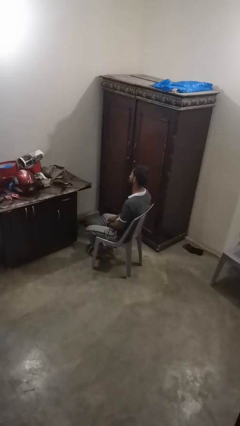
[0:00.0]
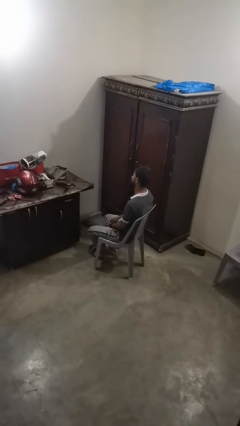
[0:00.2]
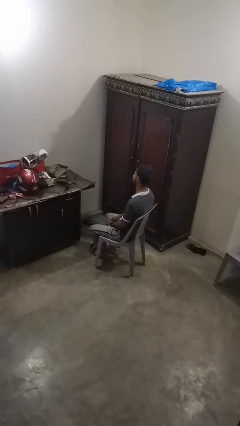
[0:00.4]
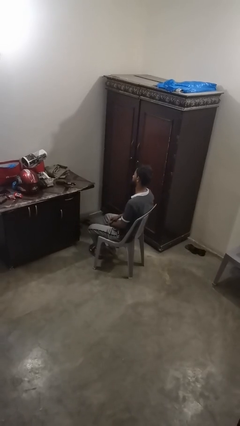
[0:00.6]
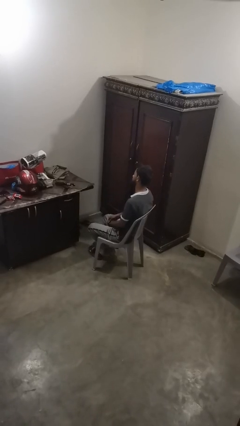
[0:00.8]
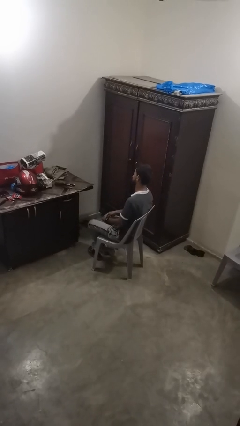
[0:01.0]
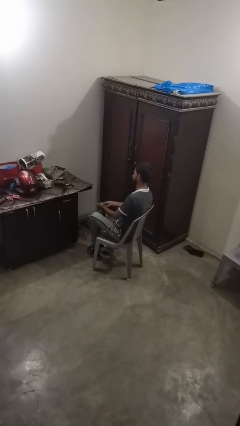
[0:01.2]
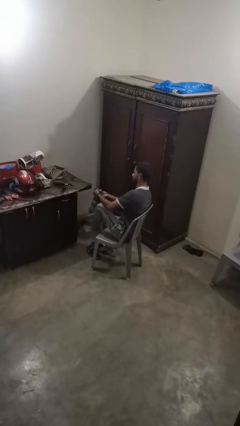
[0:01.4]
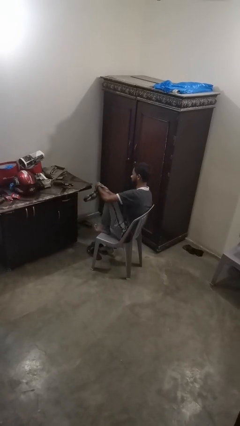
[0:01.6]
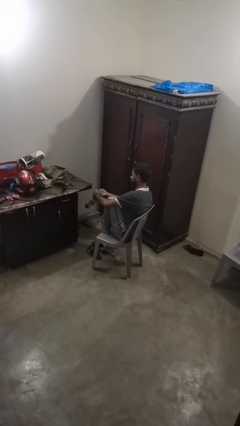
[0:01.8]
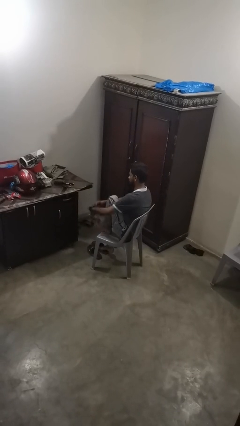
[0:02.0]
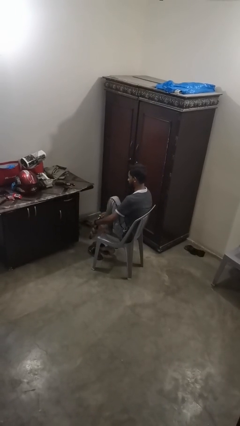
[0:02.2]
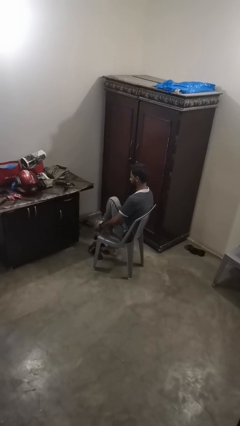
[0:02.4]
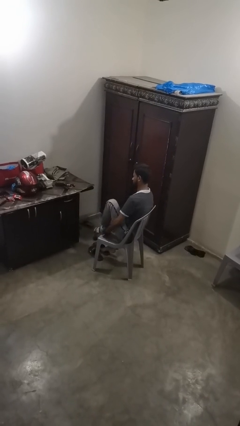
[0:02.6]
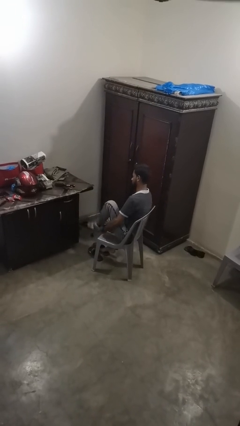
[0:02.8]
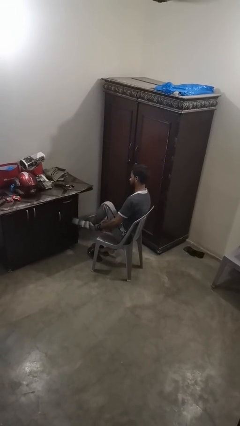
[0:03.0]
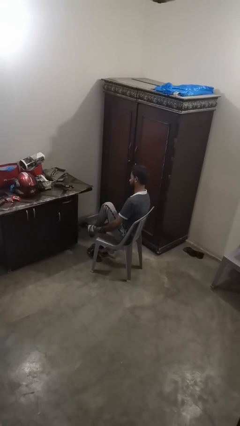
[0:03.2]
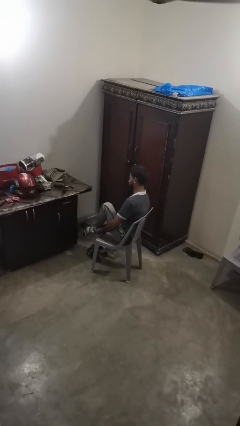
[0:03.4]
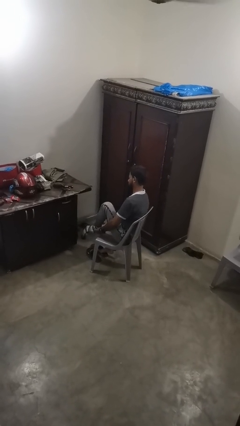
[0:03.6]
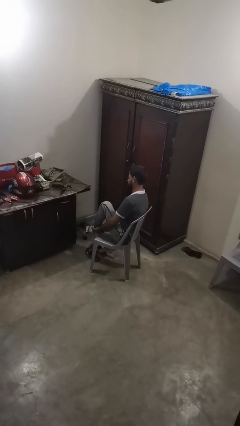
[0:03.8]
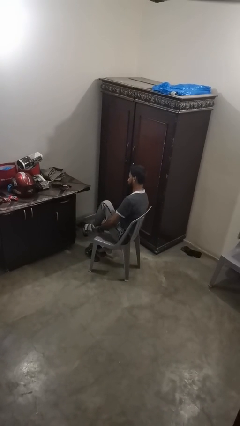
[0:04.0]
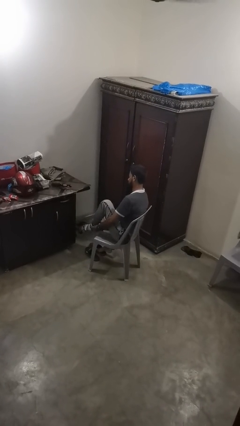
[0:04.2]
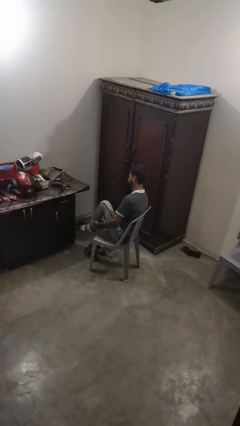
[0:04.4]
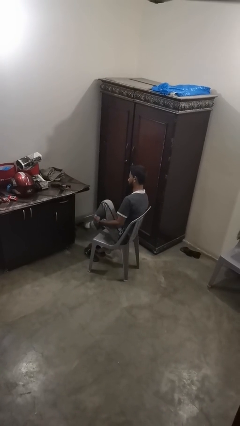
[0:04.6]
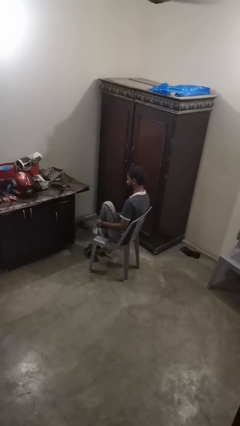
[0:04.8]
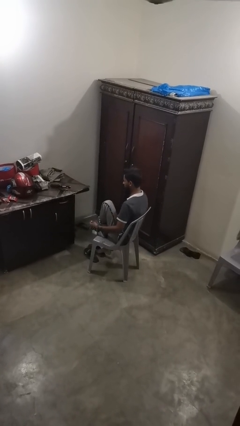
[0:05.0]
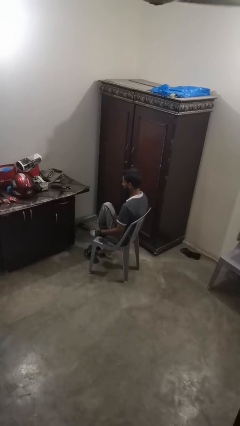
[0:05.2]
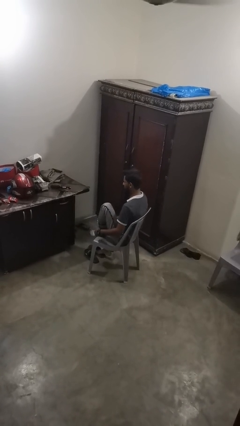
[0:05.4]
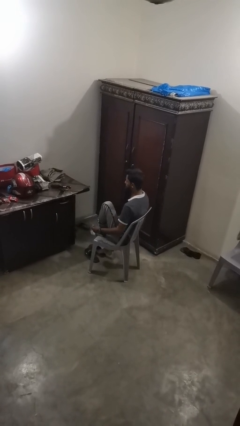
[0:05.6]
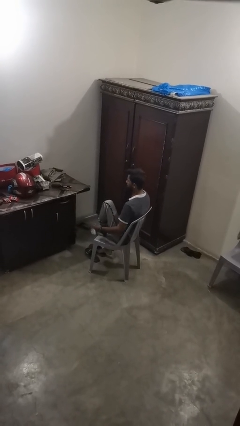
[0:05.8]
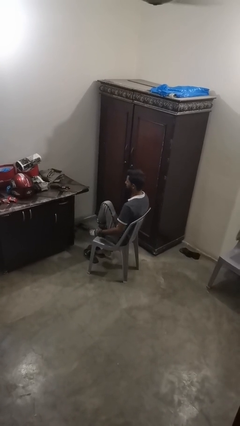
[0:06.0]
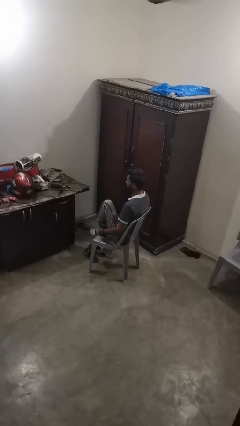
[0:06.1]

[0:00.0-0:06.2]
person puts on socks

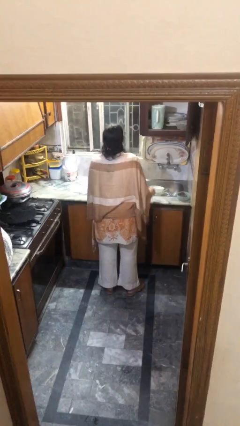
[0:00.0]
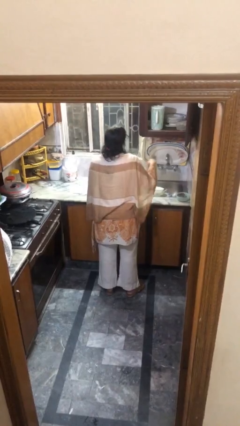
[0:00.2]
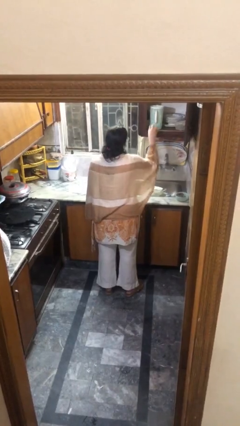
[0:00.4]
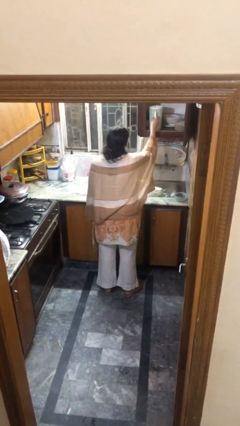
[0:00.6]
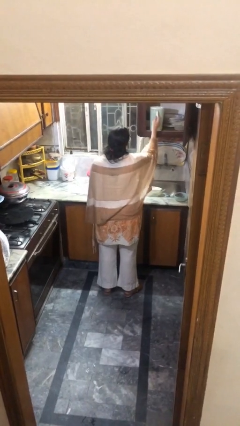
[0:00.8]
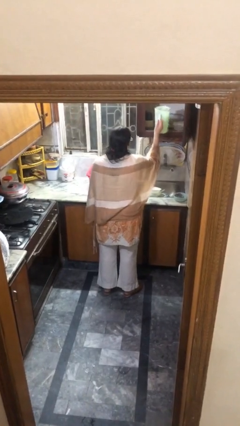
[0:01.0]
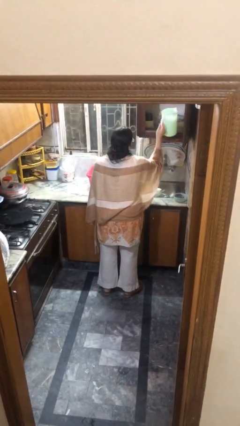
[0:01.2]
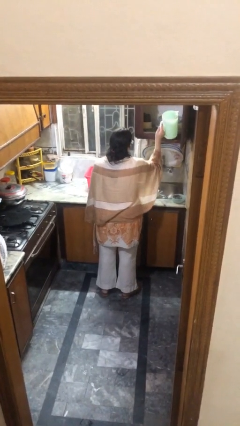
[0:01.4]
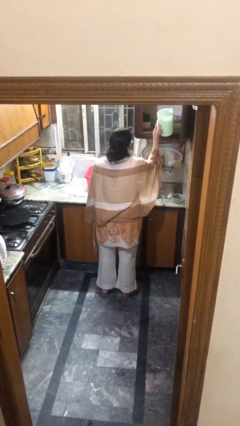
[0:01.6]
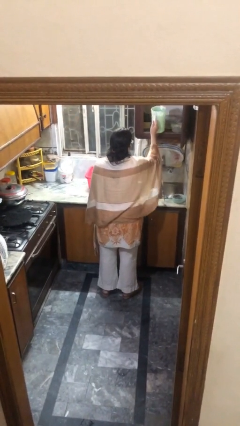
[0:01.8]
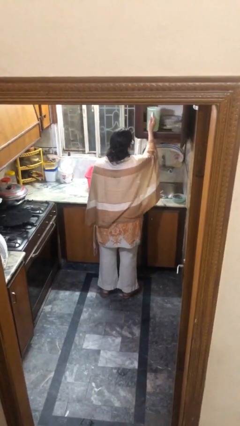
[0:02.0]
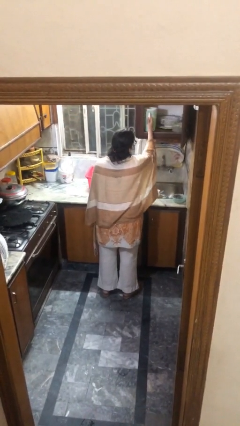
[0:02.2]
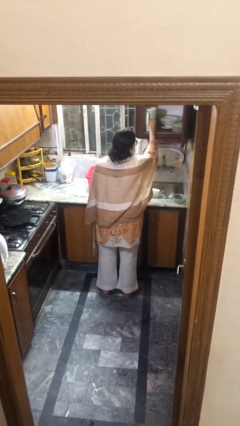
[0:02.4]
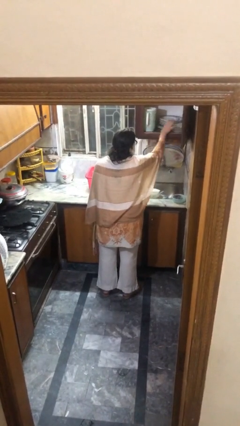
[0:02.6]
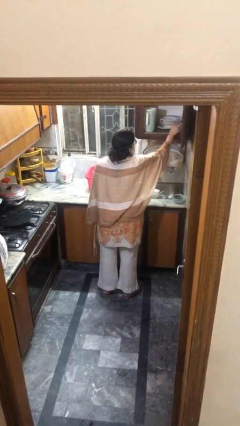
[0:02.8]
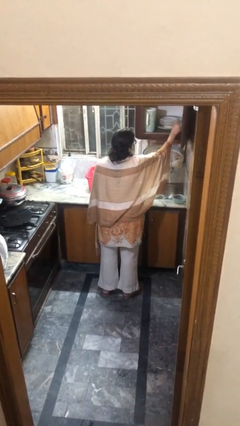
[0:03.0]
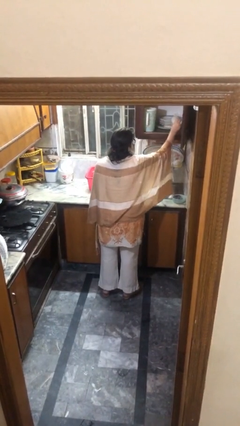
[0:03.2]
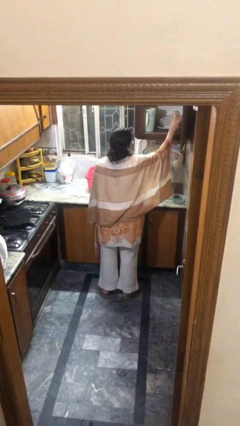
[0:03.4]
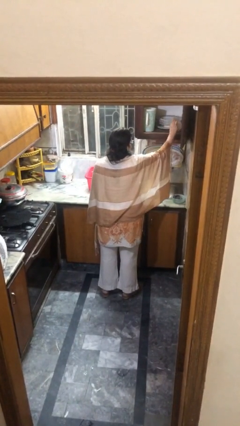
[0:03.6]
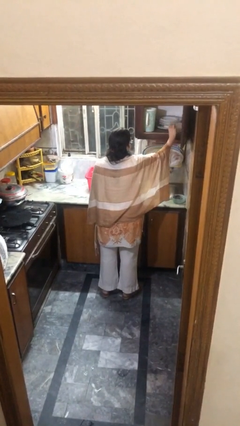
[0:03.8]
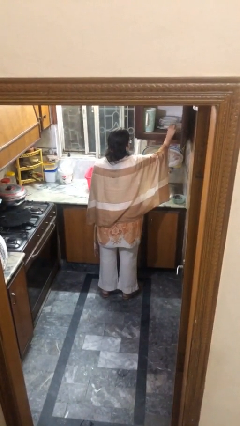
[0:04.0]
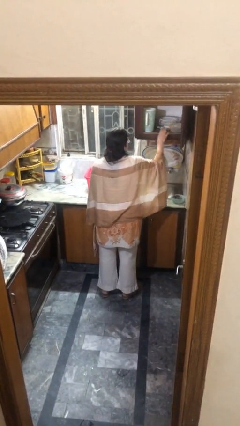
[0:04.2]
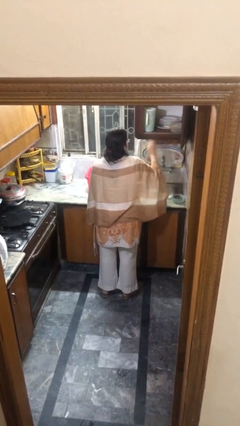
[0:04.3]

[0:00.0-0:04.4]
person searches in kitchen drawer

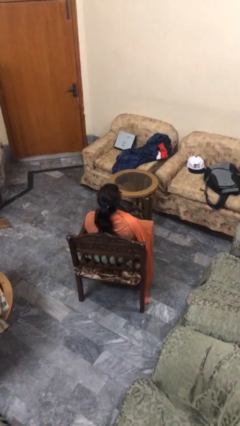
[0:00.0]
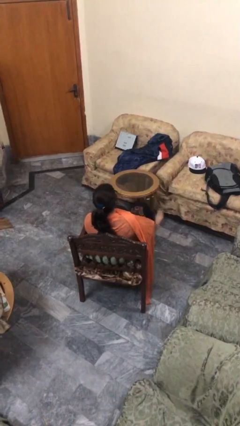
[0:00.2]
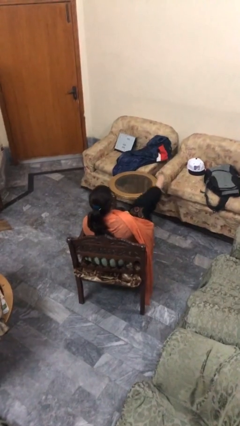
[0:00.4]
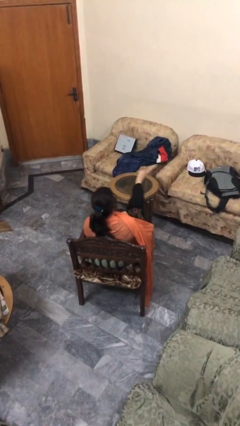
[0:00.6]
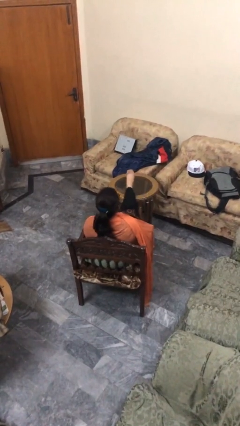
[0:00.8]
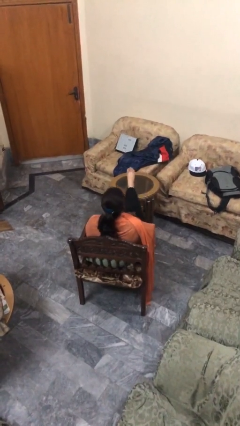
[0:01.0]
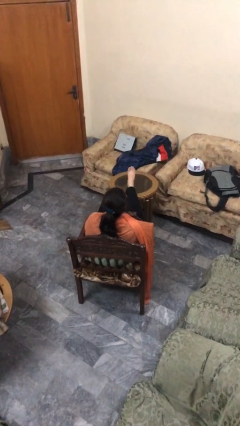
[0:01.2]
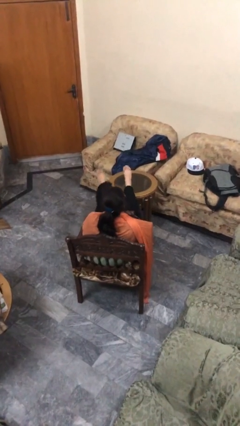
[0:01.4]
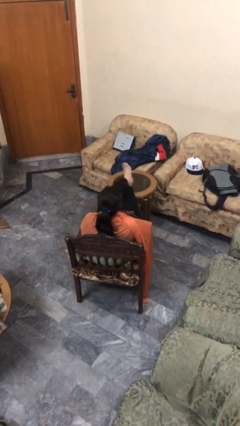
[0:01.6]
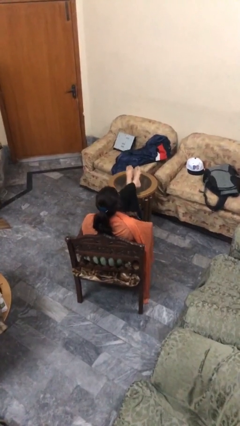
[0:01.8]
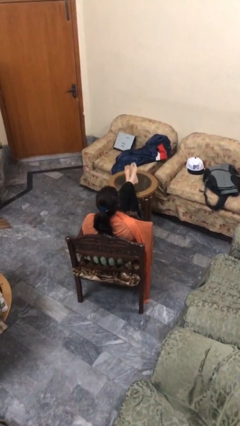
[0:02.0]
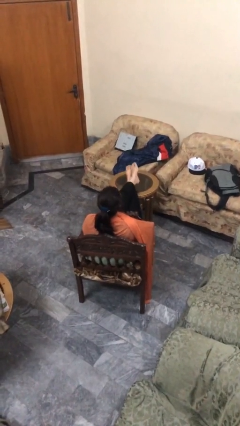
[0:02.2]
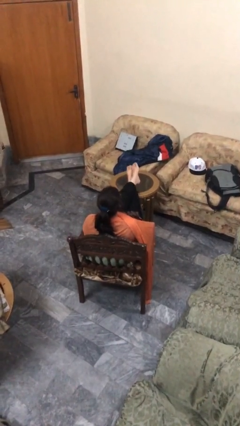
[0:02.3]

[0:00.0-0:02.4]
person puts feet up

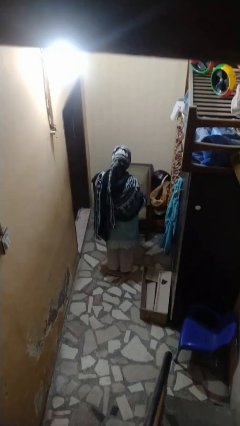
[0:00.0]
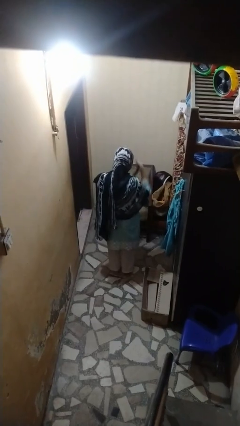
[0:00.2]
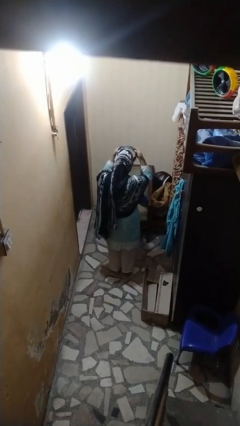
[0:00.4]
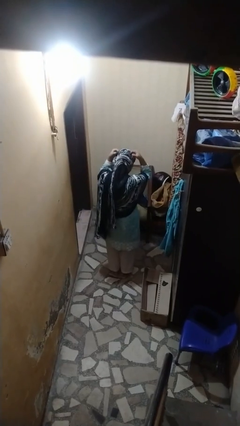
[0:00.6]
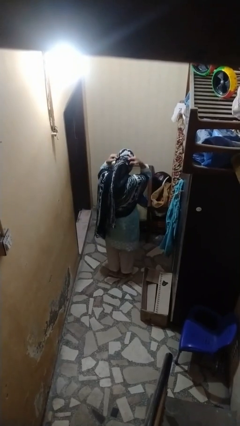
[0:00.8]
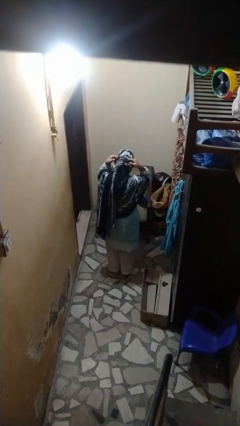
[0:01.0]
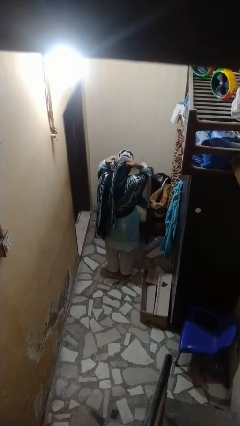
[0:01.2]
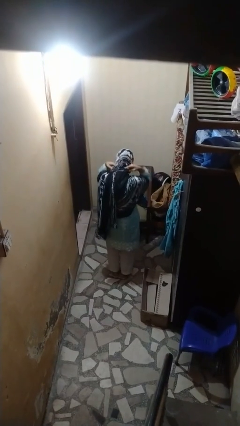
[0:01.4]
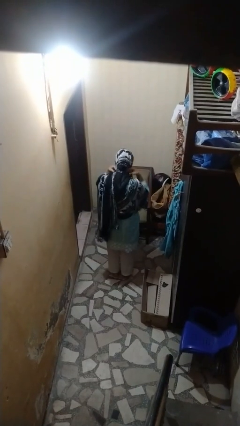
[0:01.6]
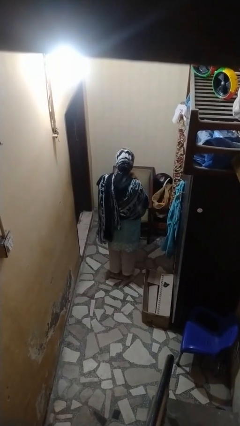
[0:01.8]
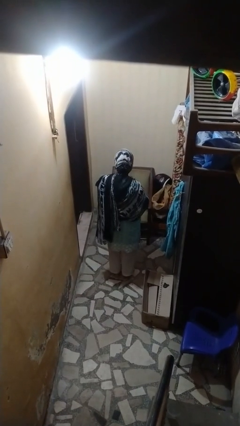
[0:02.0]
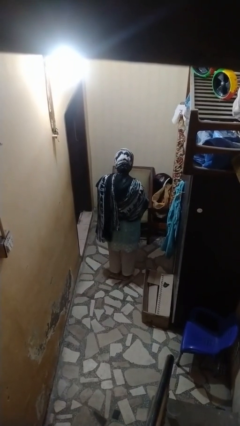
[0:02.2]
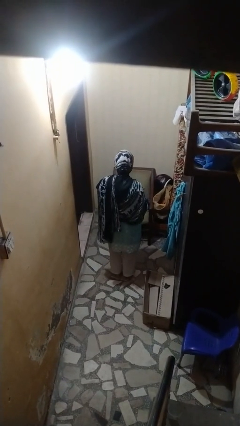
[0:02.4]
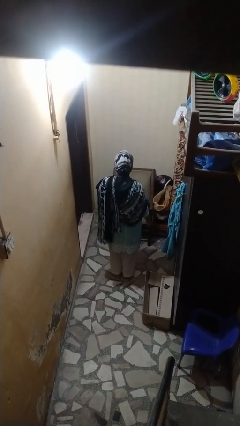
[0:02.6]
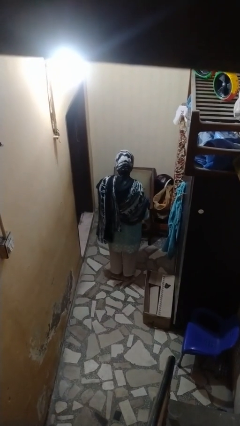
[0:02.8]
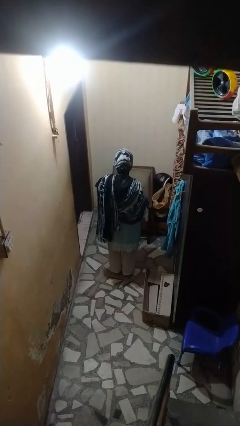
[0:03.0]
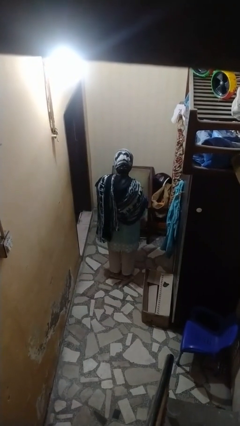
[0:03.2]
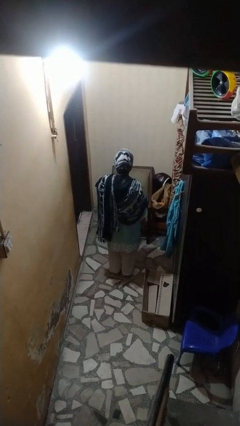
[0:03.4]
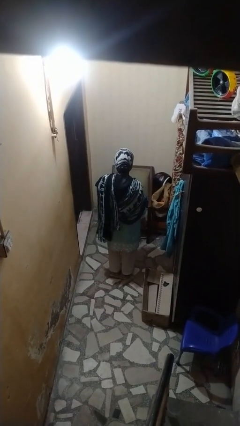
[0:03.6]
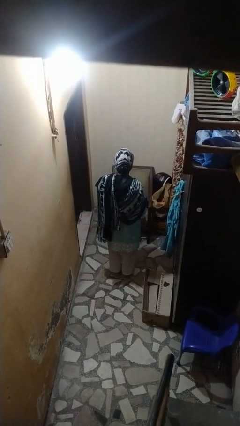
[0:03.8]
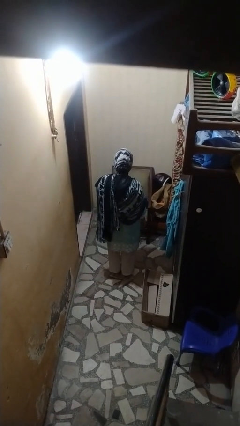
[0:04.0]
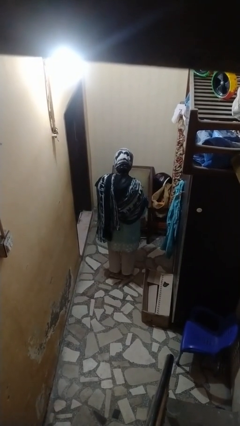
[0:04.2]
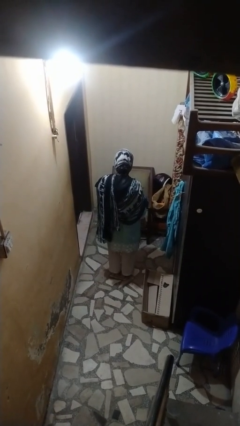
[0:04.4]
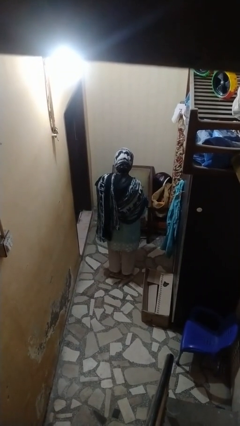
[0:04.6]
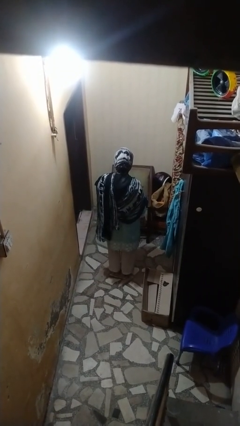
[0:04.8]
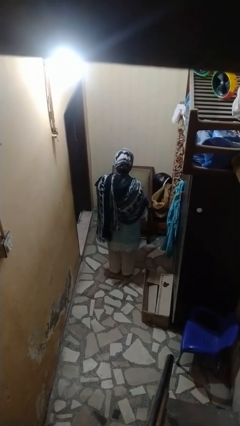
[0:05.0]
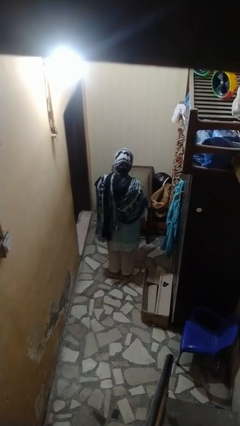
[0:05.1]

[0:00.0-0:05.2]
person puts on necktie
